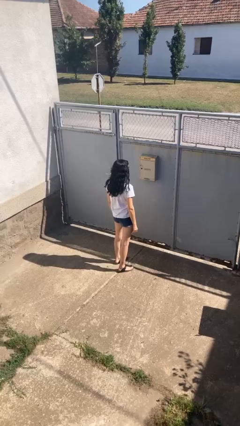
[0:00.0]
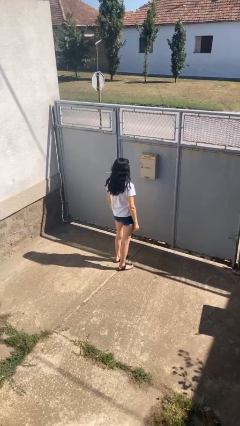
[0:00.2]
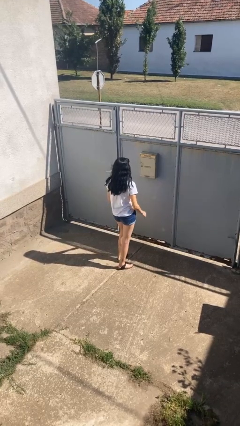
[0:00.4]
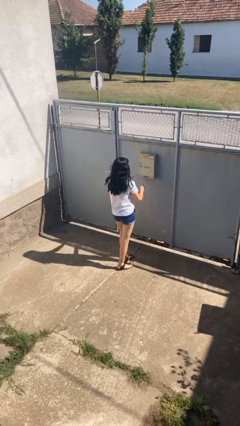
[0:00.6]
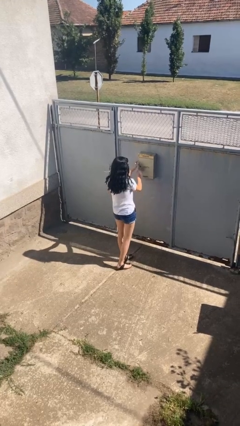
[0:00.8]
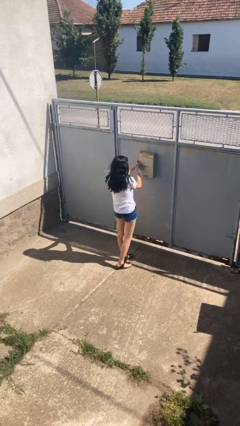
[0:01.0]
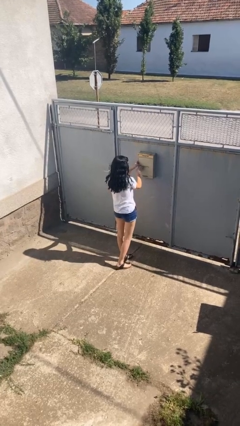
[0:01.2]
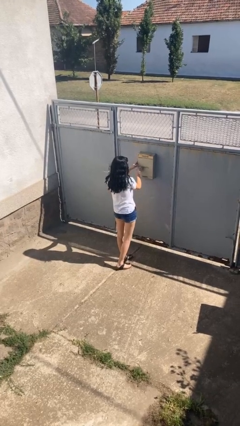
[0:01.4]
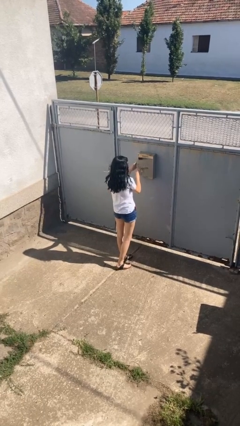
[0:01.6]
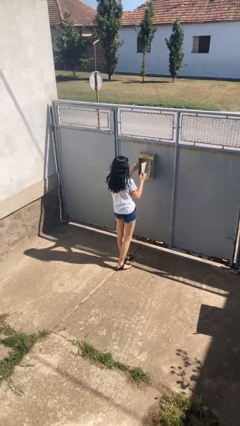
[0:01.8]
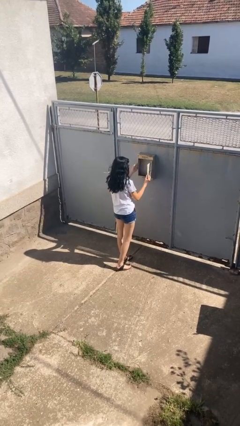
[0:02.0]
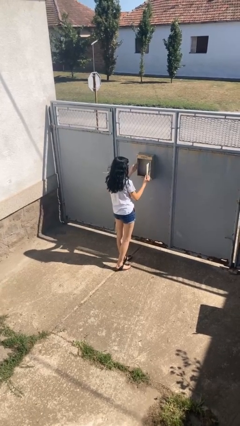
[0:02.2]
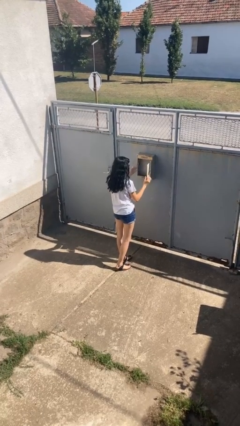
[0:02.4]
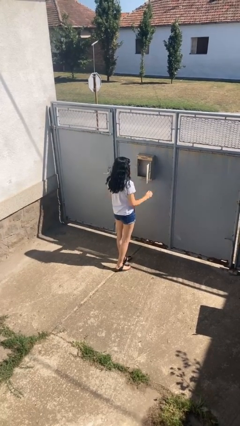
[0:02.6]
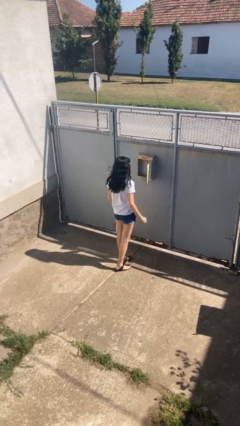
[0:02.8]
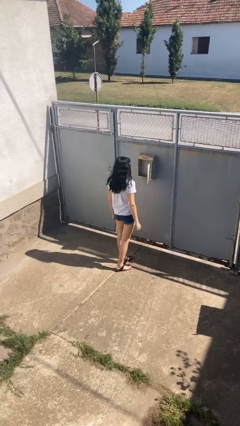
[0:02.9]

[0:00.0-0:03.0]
person opens mailbox

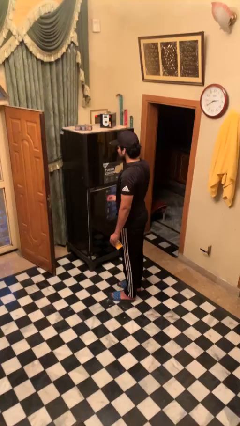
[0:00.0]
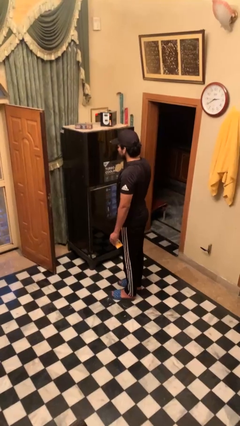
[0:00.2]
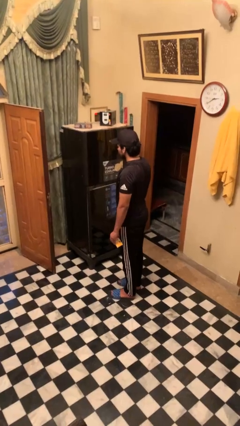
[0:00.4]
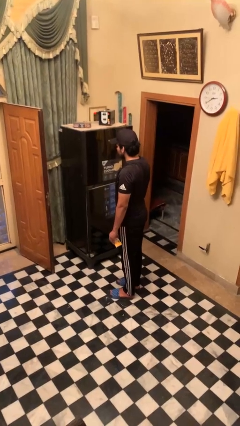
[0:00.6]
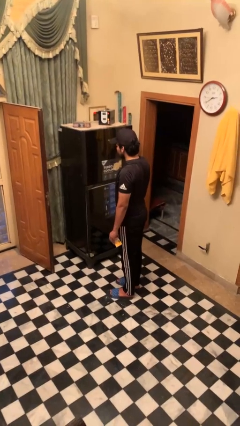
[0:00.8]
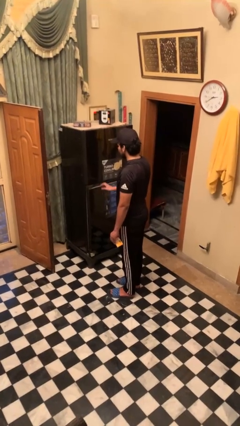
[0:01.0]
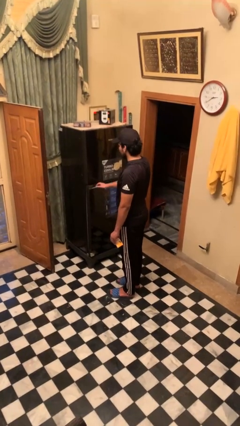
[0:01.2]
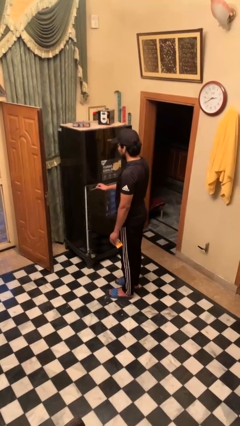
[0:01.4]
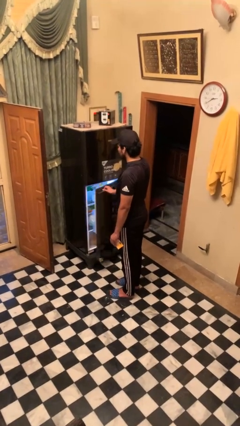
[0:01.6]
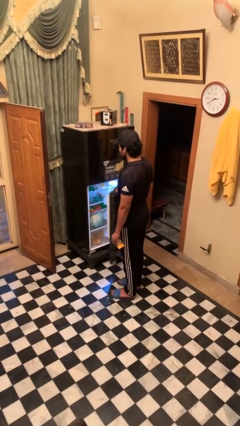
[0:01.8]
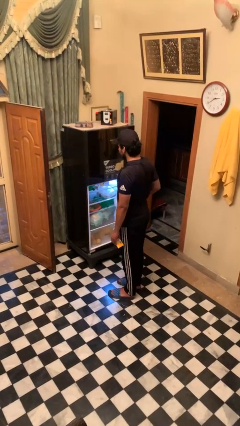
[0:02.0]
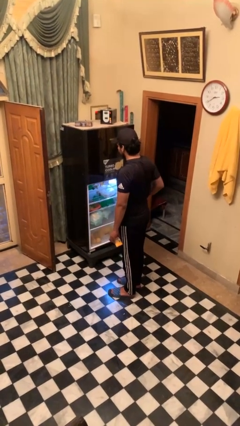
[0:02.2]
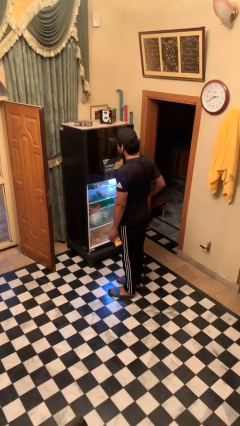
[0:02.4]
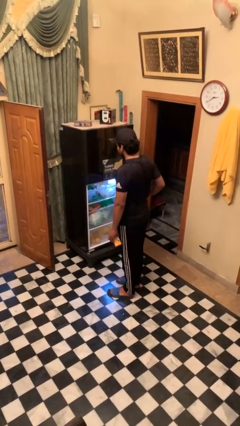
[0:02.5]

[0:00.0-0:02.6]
person opens refrigerator

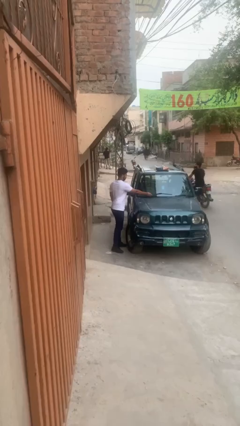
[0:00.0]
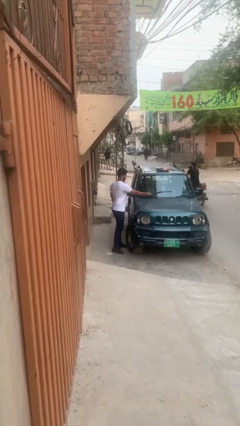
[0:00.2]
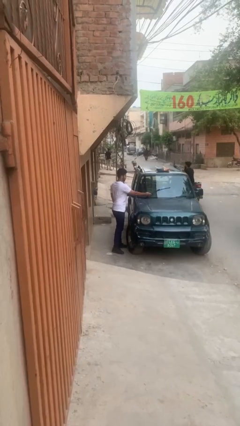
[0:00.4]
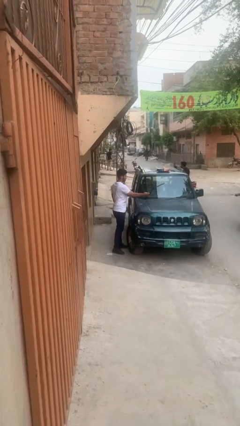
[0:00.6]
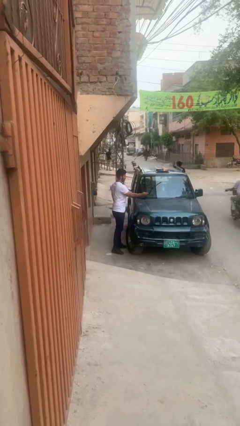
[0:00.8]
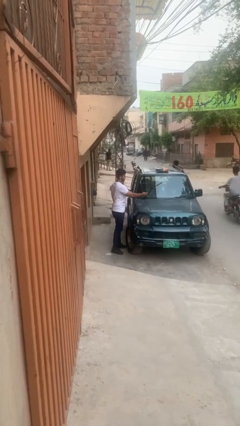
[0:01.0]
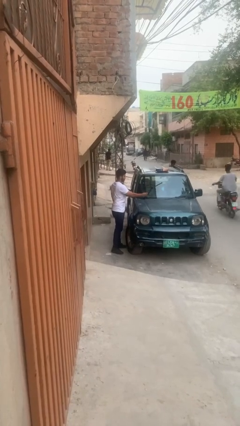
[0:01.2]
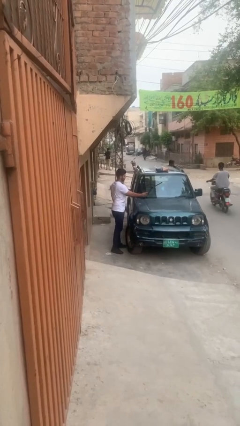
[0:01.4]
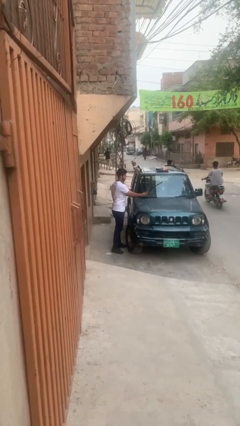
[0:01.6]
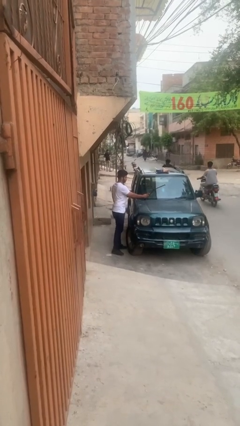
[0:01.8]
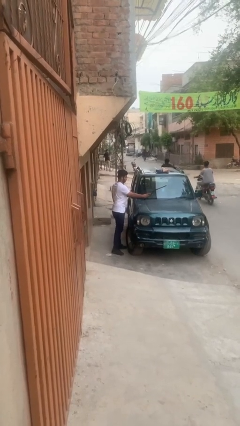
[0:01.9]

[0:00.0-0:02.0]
person flips up car wipers

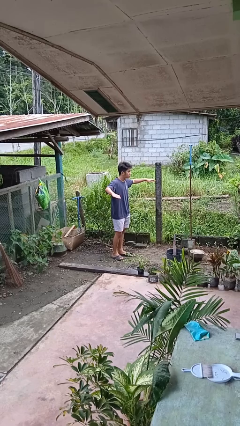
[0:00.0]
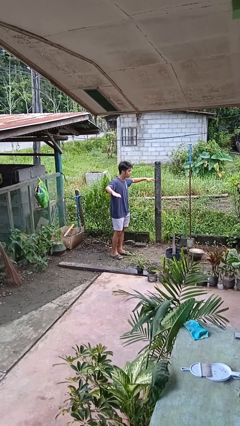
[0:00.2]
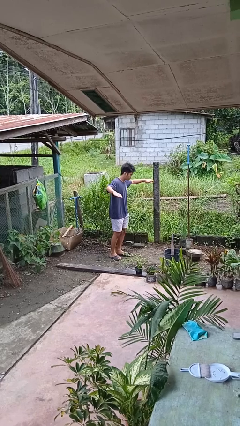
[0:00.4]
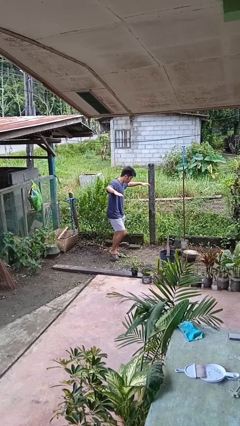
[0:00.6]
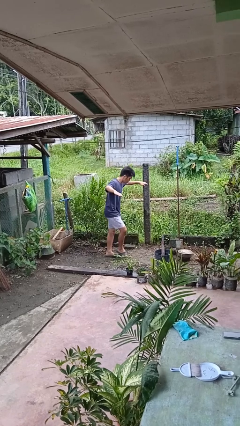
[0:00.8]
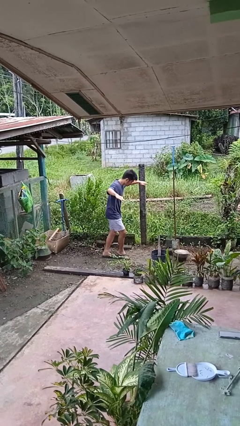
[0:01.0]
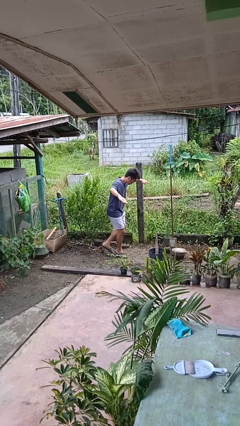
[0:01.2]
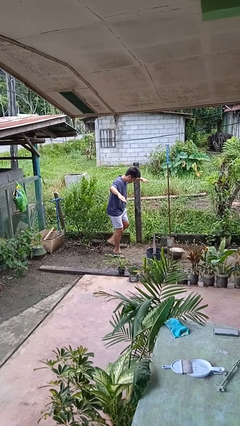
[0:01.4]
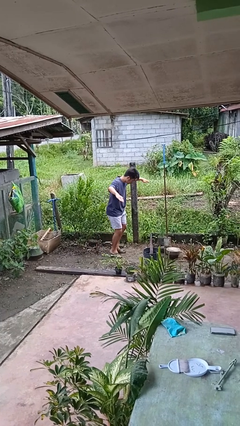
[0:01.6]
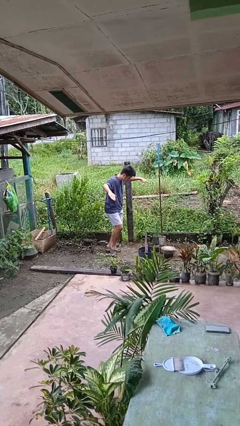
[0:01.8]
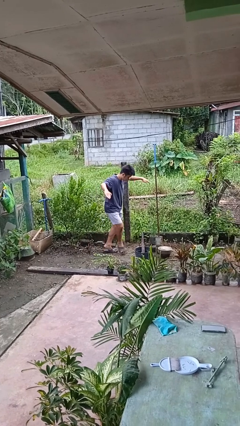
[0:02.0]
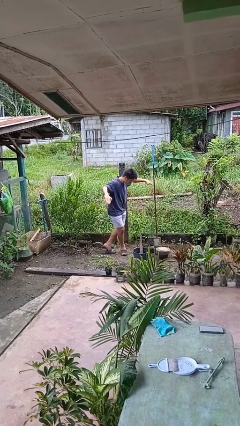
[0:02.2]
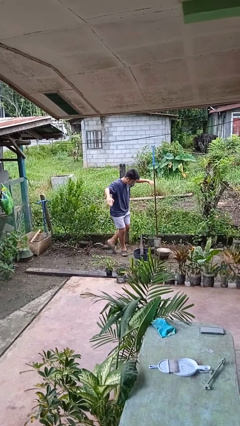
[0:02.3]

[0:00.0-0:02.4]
person walks tiptoe

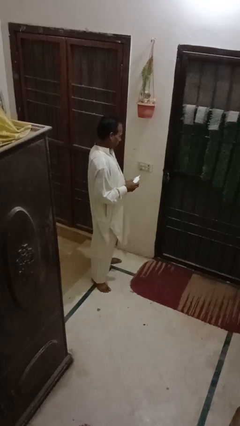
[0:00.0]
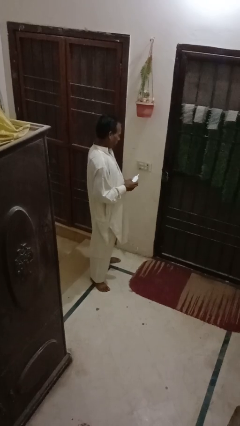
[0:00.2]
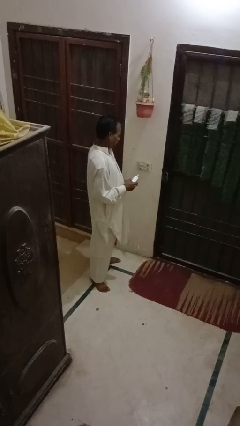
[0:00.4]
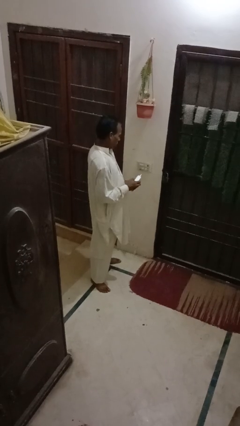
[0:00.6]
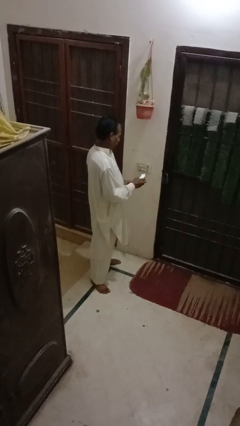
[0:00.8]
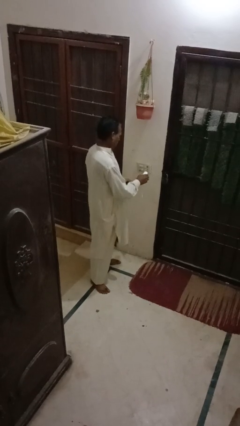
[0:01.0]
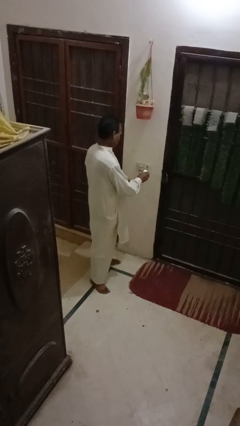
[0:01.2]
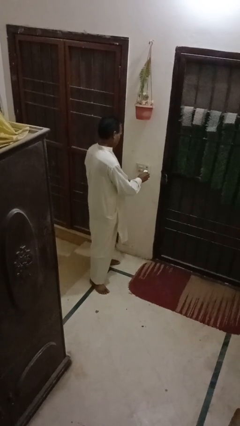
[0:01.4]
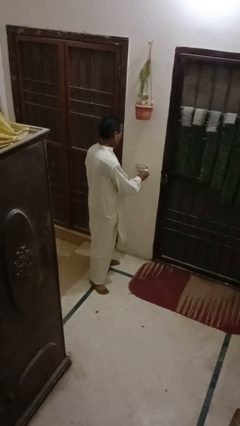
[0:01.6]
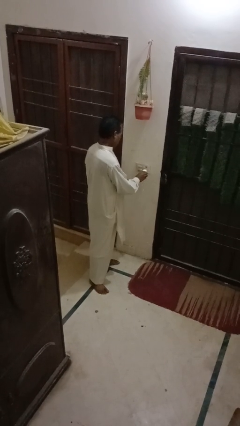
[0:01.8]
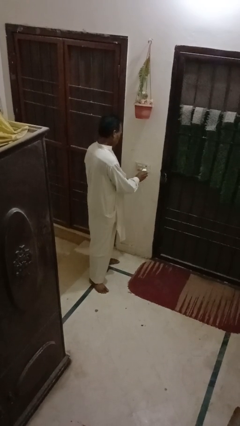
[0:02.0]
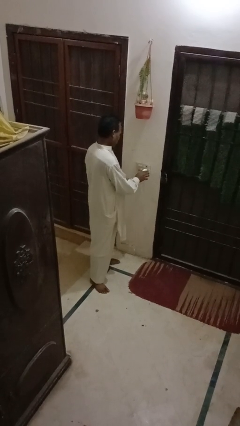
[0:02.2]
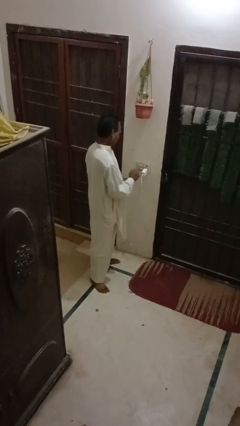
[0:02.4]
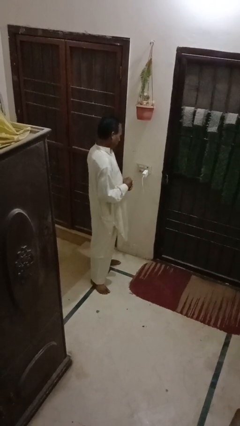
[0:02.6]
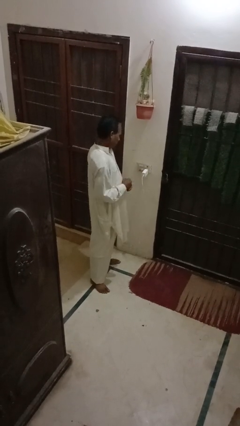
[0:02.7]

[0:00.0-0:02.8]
person plugs into electrical socket

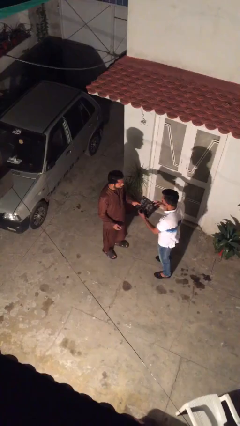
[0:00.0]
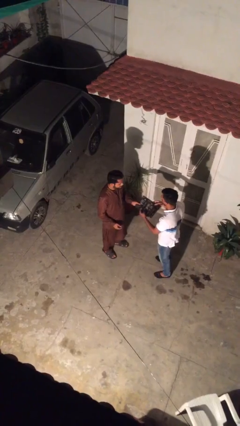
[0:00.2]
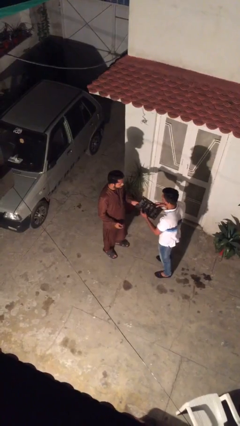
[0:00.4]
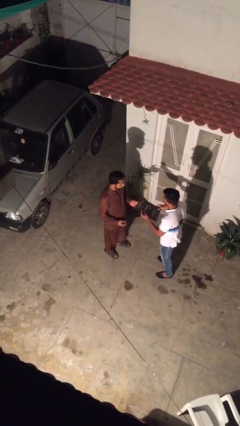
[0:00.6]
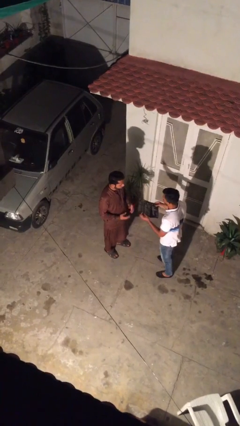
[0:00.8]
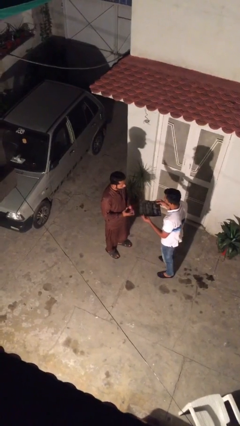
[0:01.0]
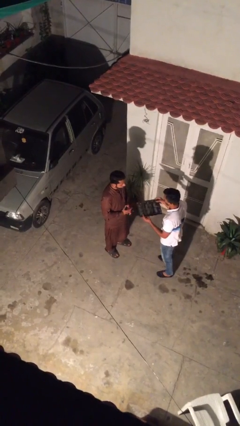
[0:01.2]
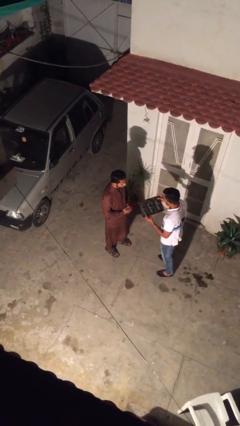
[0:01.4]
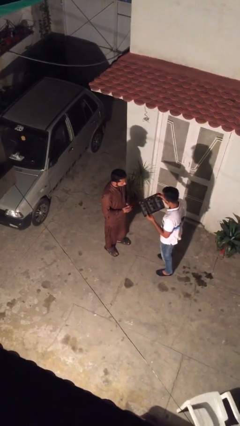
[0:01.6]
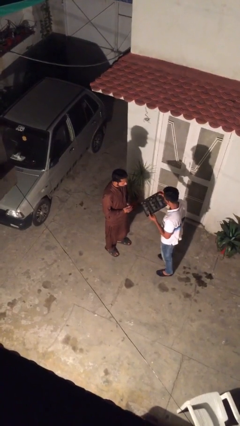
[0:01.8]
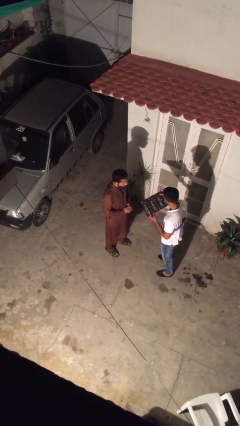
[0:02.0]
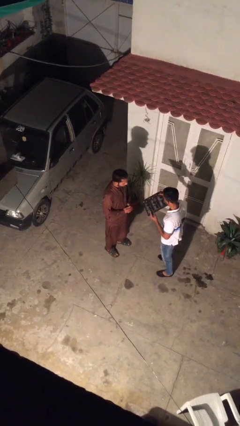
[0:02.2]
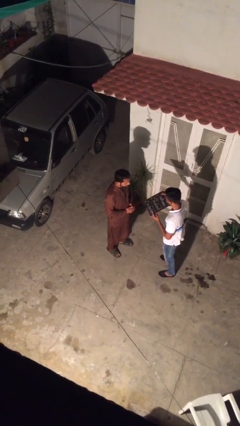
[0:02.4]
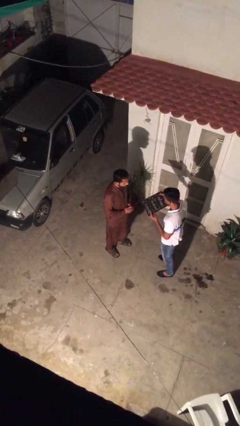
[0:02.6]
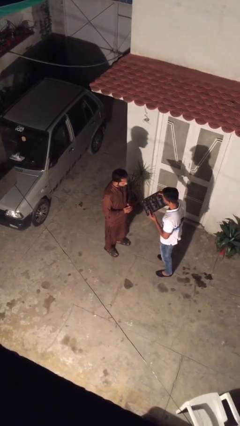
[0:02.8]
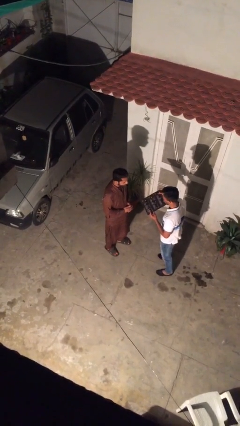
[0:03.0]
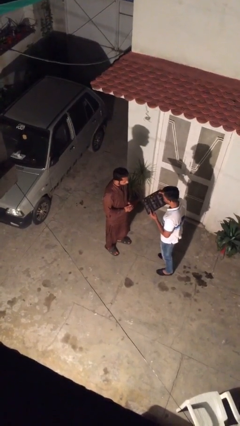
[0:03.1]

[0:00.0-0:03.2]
person transfers object to person

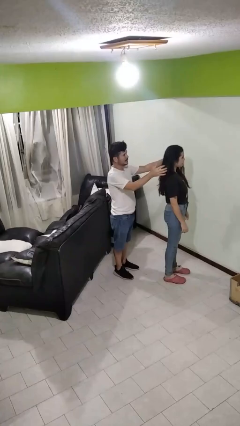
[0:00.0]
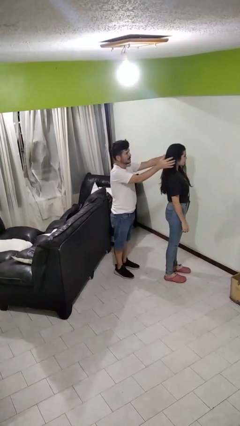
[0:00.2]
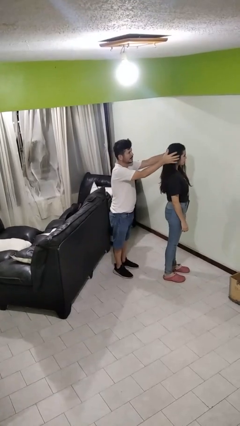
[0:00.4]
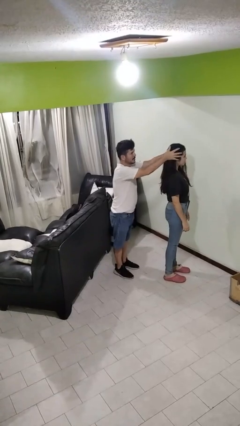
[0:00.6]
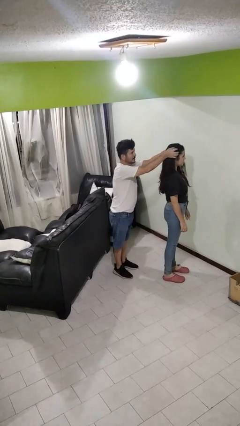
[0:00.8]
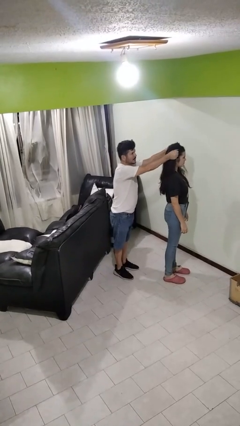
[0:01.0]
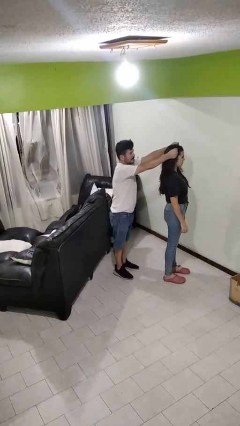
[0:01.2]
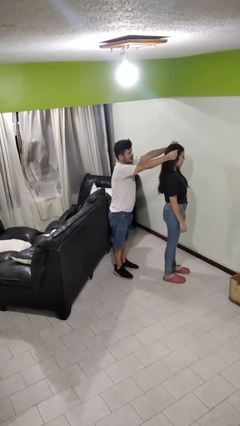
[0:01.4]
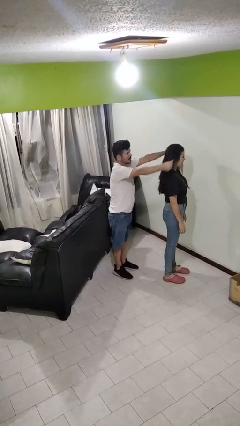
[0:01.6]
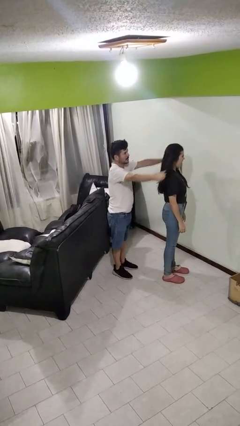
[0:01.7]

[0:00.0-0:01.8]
person grabs person by hair
